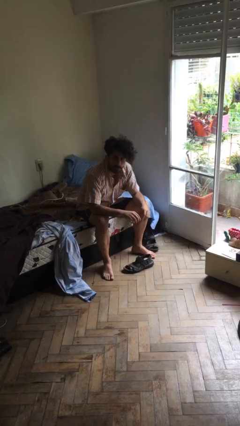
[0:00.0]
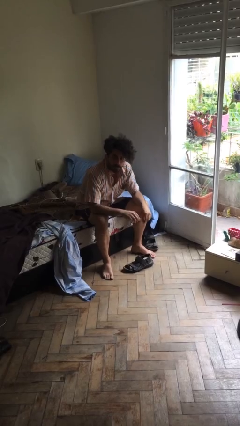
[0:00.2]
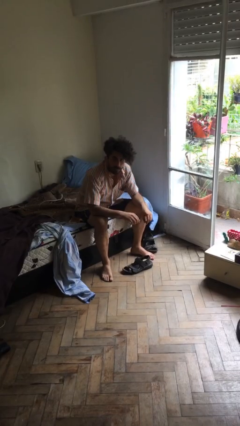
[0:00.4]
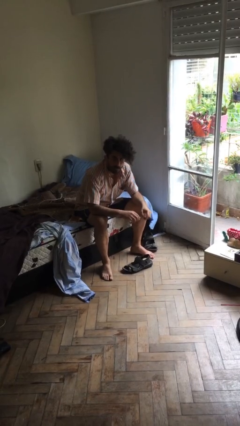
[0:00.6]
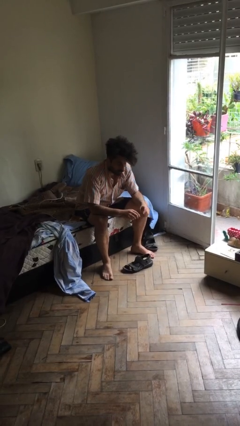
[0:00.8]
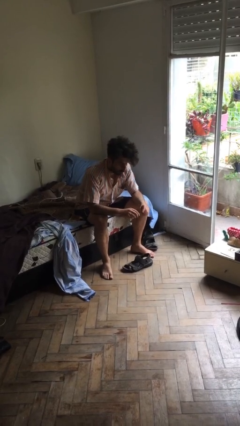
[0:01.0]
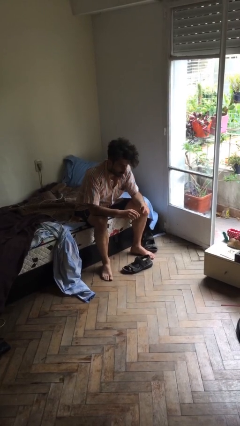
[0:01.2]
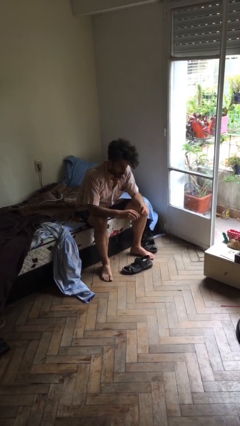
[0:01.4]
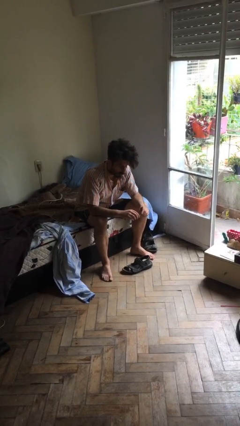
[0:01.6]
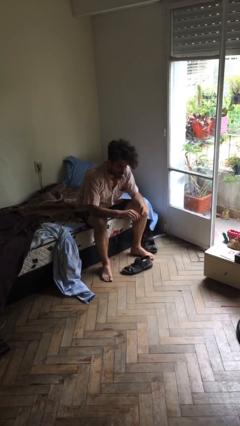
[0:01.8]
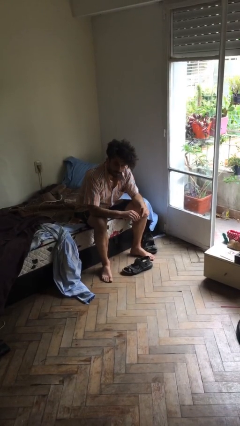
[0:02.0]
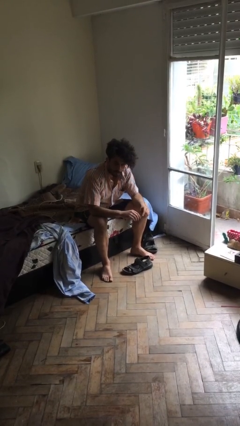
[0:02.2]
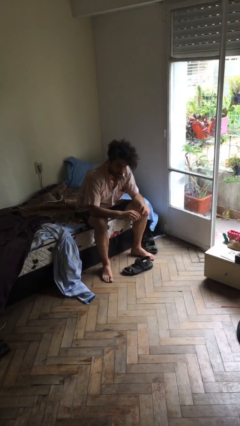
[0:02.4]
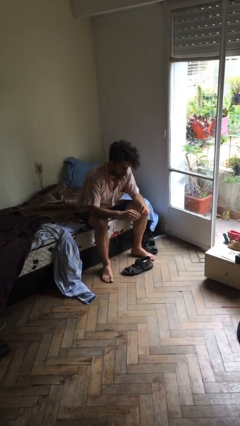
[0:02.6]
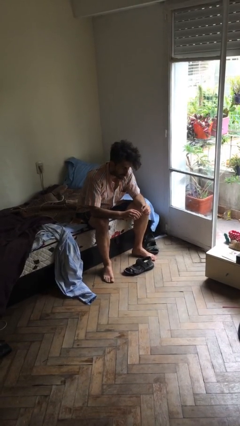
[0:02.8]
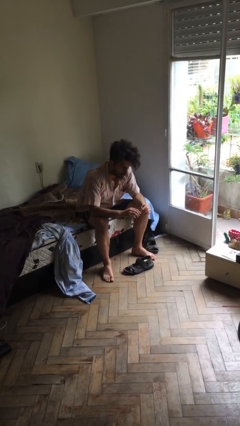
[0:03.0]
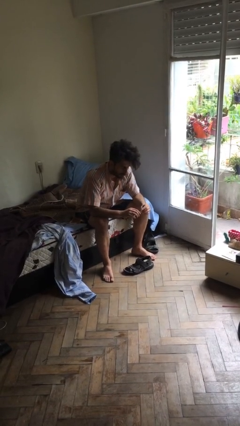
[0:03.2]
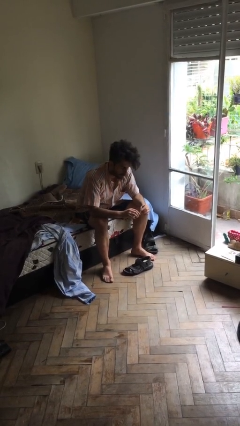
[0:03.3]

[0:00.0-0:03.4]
person clips fingernails

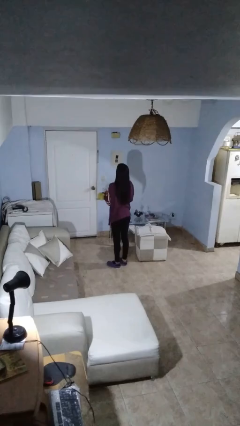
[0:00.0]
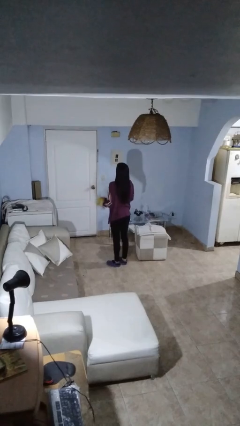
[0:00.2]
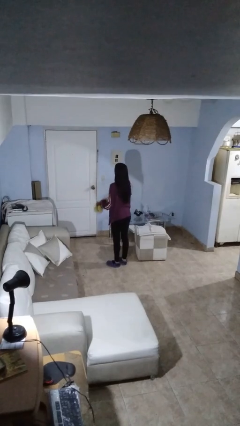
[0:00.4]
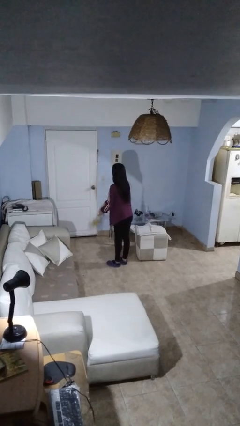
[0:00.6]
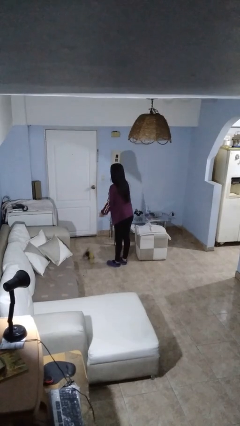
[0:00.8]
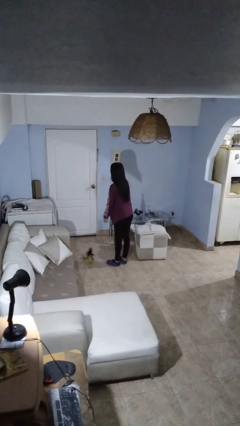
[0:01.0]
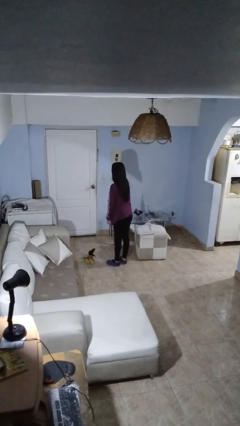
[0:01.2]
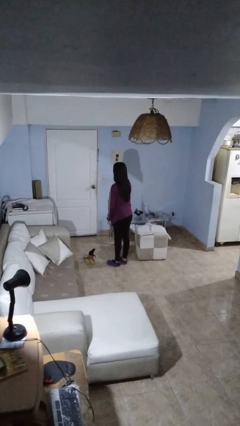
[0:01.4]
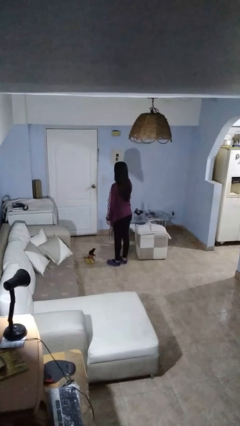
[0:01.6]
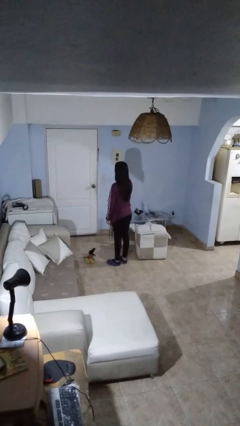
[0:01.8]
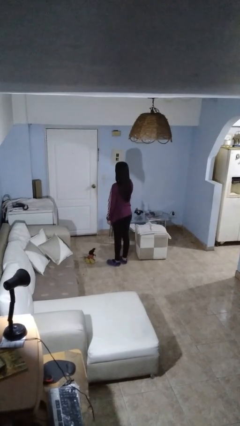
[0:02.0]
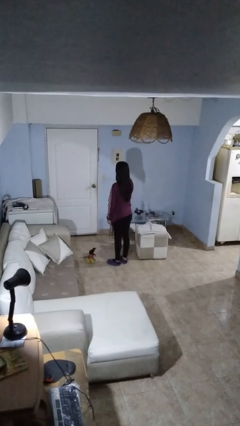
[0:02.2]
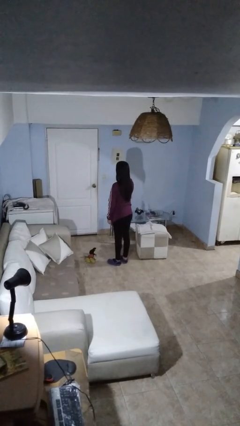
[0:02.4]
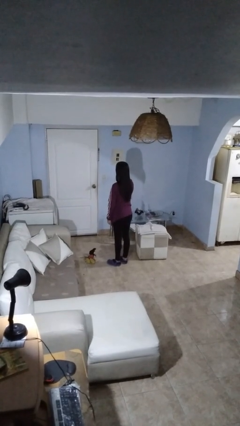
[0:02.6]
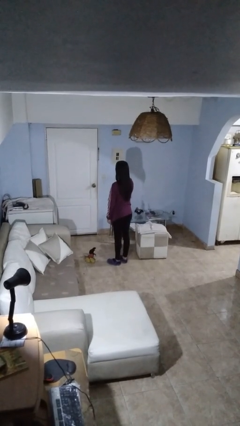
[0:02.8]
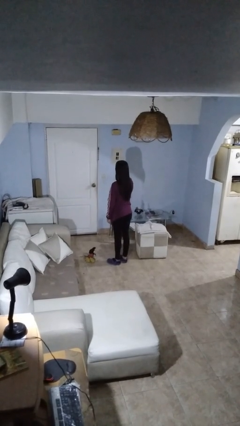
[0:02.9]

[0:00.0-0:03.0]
person drops object

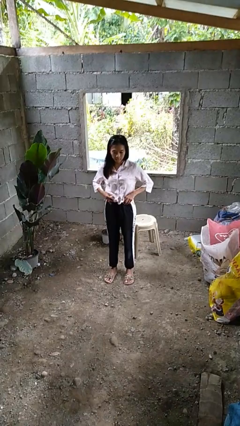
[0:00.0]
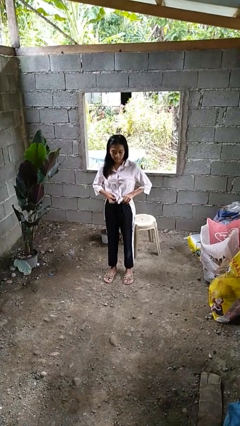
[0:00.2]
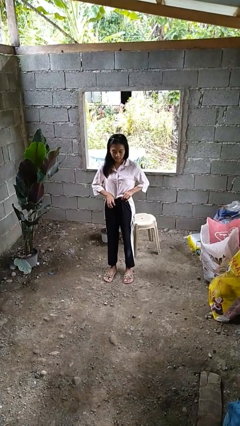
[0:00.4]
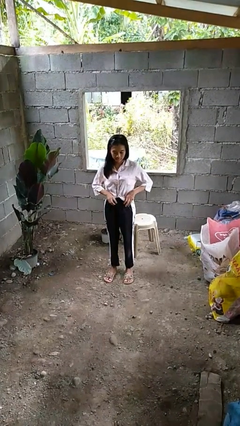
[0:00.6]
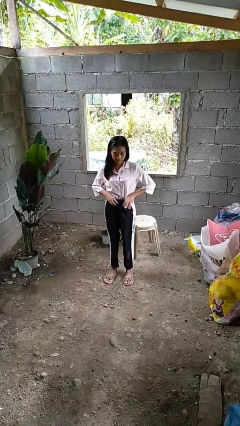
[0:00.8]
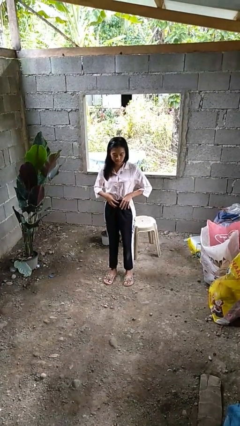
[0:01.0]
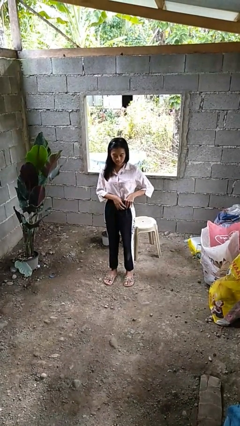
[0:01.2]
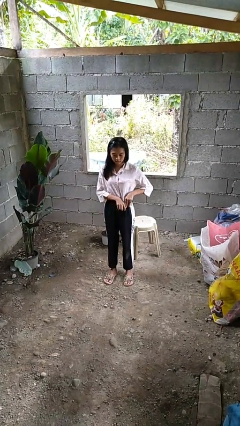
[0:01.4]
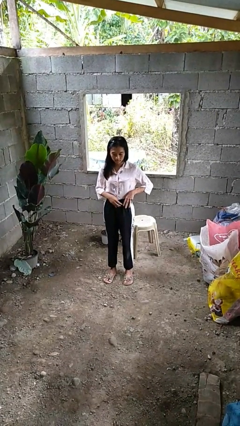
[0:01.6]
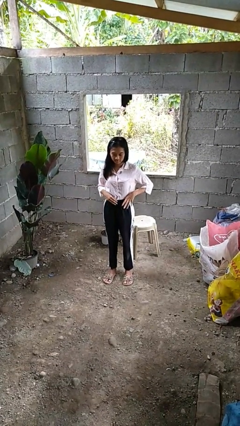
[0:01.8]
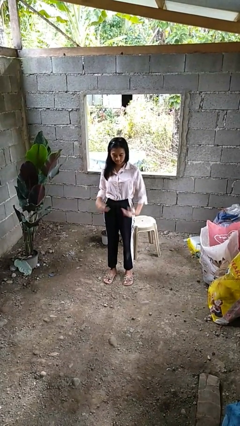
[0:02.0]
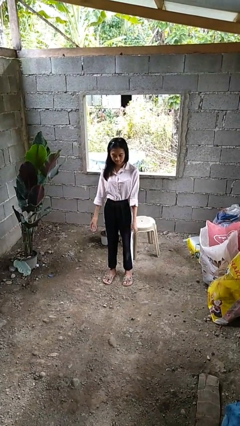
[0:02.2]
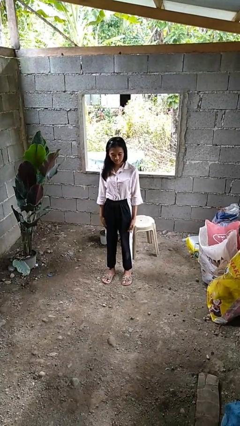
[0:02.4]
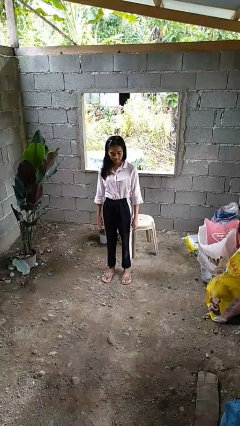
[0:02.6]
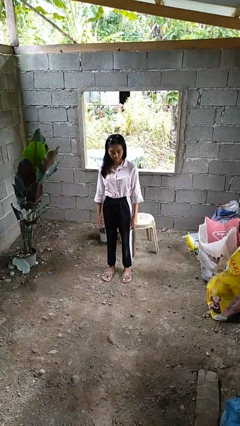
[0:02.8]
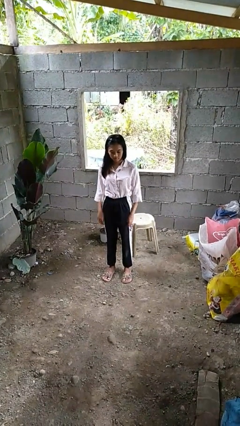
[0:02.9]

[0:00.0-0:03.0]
person tucks in shirt

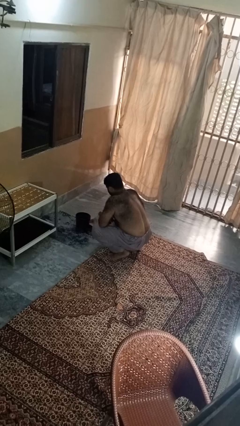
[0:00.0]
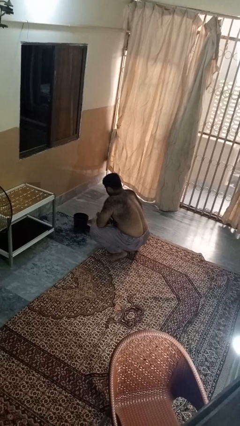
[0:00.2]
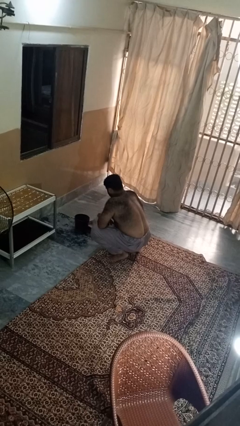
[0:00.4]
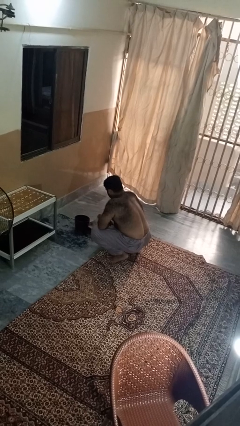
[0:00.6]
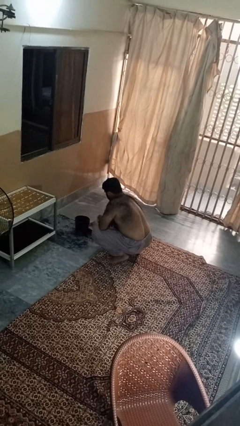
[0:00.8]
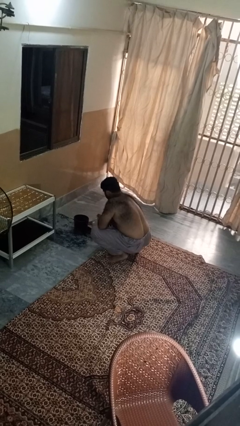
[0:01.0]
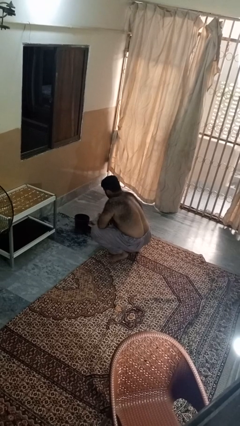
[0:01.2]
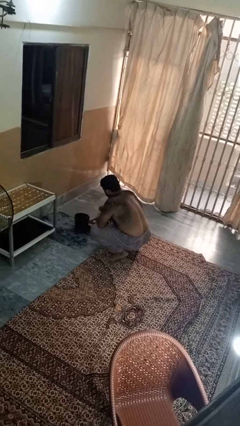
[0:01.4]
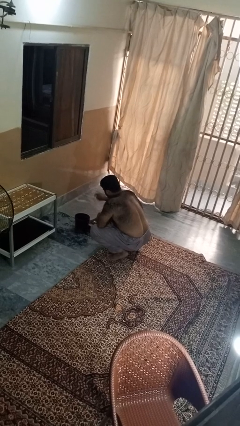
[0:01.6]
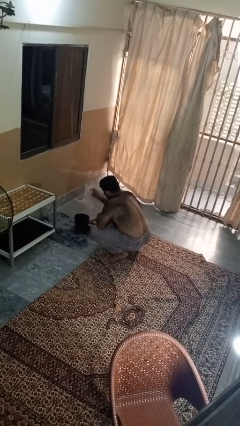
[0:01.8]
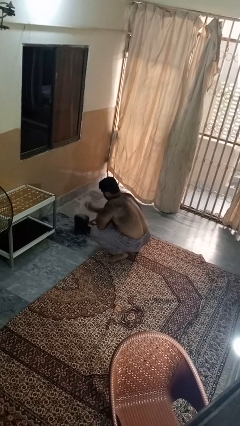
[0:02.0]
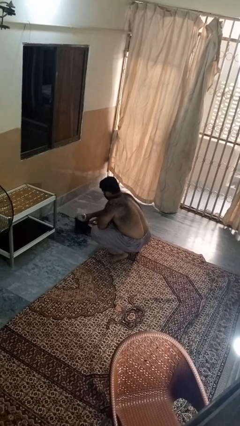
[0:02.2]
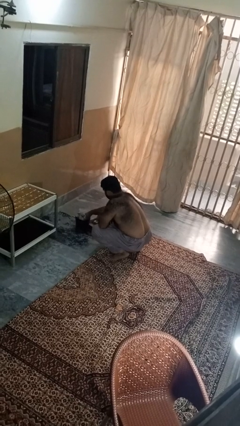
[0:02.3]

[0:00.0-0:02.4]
person discards trash

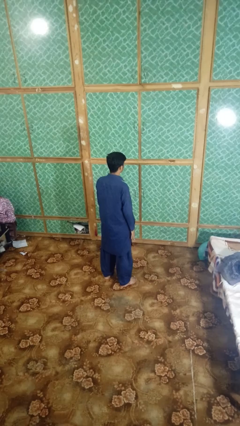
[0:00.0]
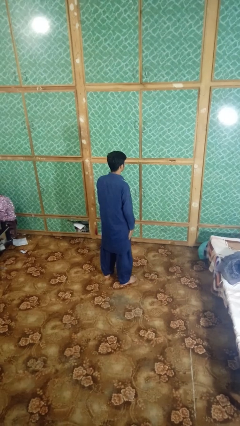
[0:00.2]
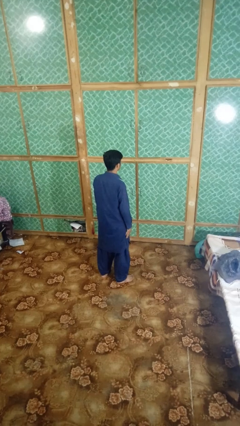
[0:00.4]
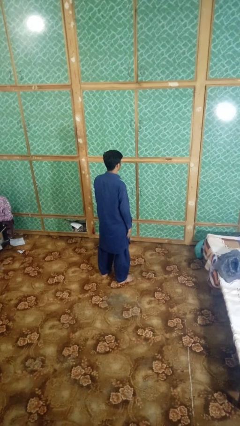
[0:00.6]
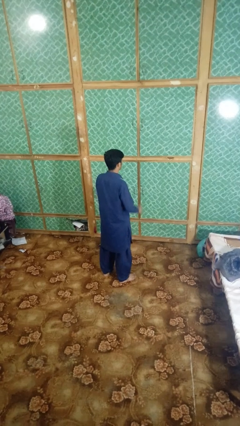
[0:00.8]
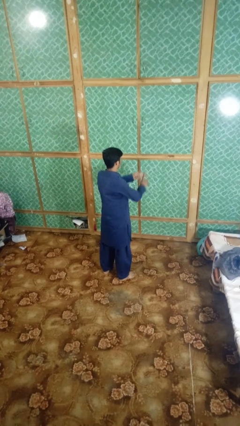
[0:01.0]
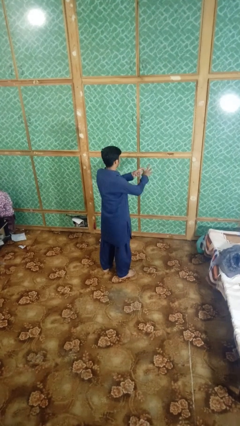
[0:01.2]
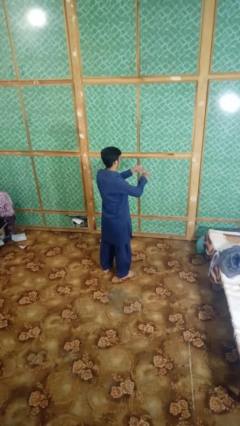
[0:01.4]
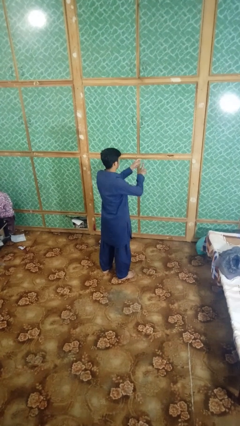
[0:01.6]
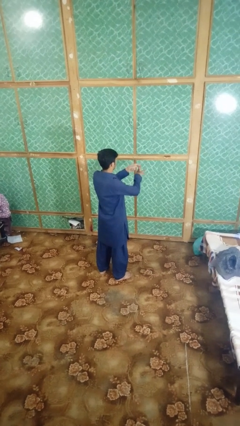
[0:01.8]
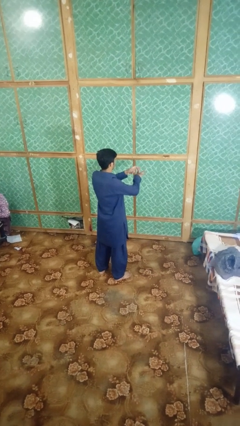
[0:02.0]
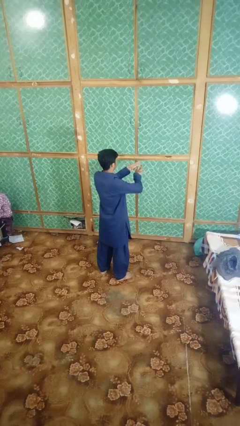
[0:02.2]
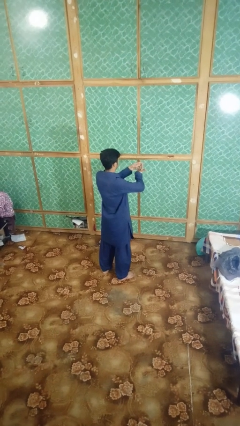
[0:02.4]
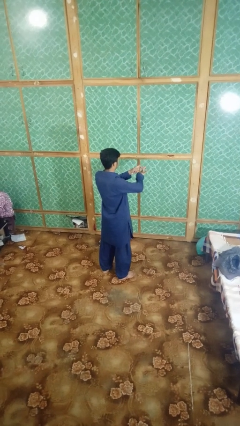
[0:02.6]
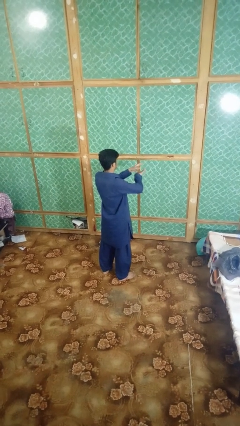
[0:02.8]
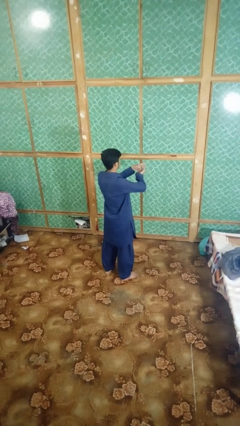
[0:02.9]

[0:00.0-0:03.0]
person snaps fingers

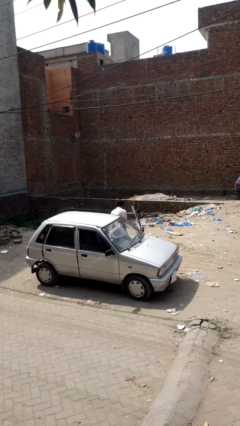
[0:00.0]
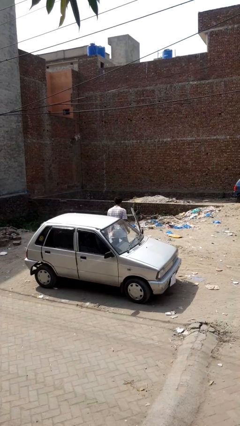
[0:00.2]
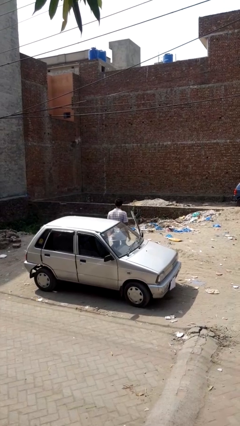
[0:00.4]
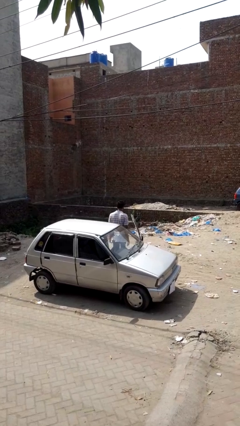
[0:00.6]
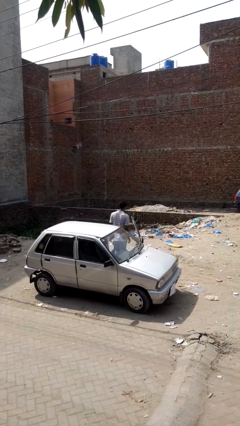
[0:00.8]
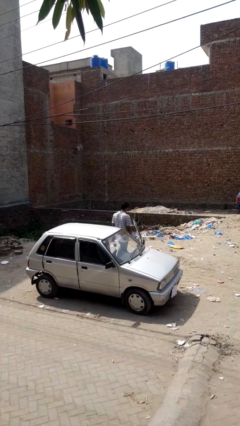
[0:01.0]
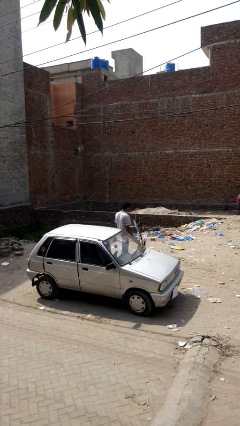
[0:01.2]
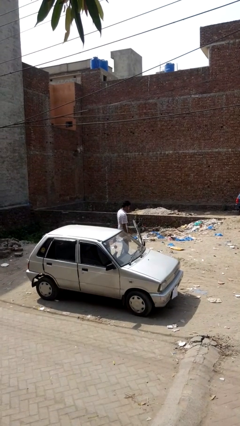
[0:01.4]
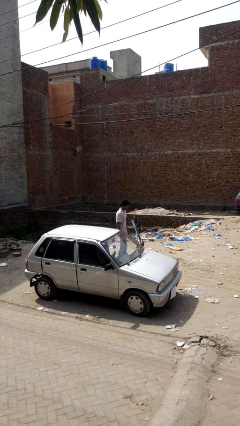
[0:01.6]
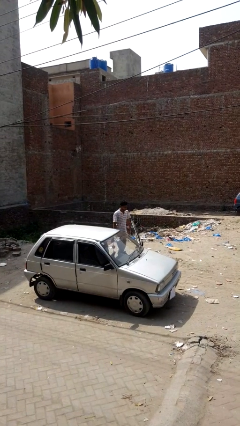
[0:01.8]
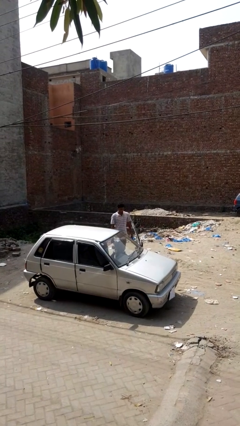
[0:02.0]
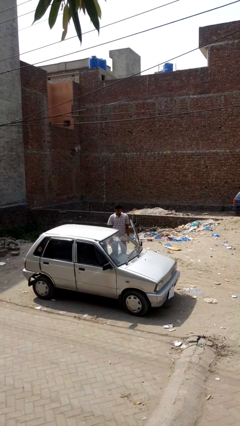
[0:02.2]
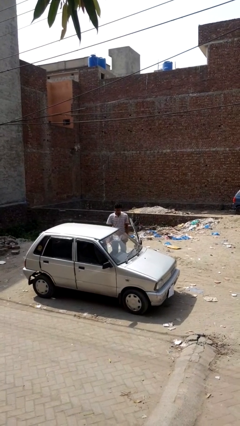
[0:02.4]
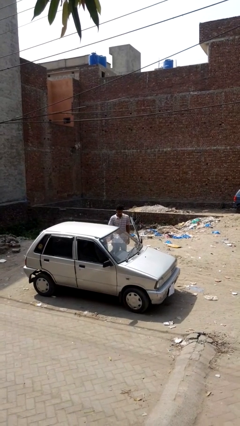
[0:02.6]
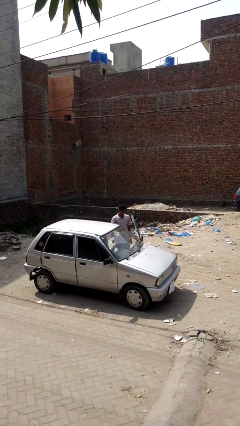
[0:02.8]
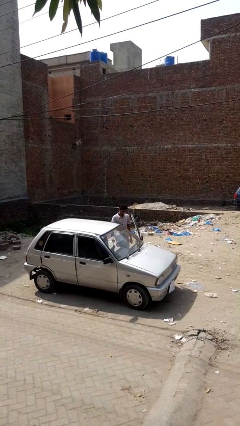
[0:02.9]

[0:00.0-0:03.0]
person exits car
